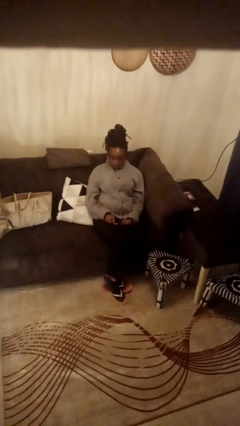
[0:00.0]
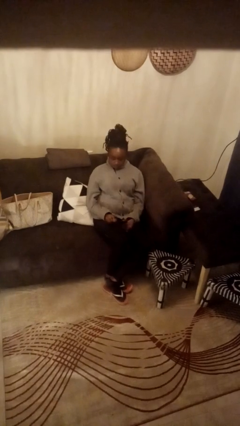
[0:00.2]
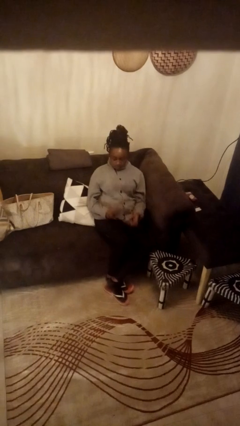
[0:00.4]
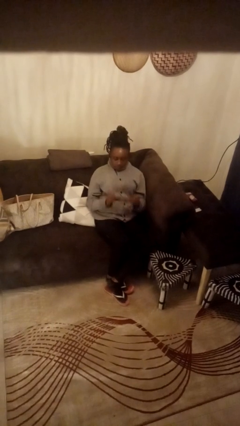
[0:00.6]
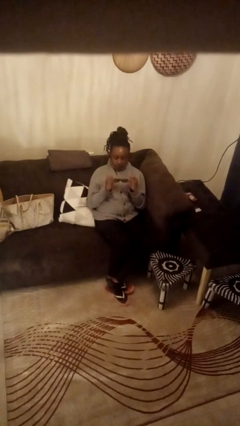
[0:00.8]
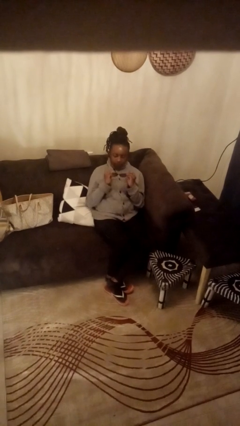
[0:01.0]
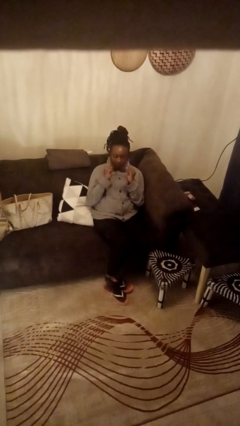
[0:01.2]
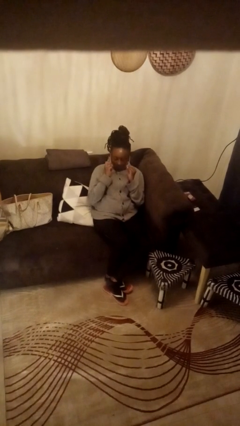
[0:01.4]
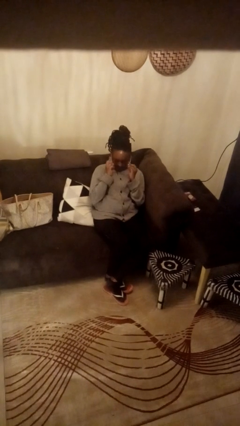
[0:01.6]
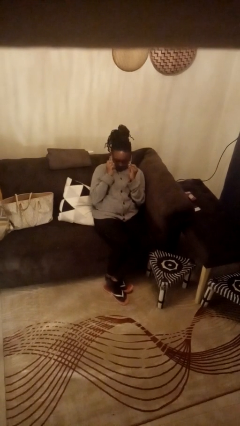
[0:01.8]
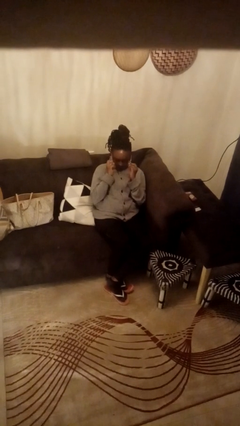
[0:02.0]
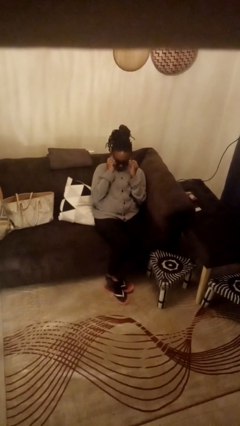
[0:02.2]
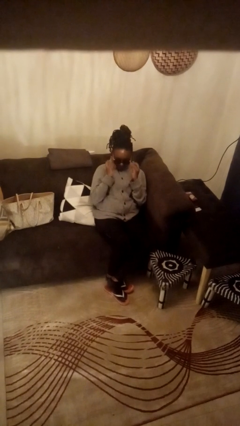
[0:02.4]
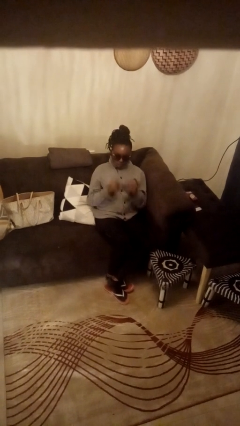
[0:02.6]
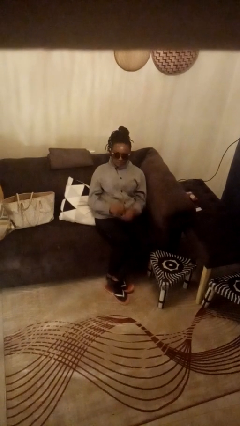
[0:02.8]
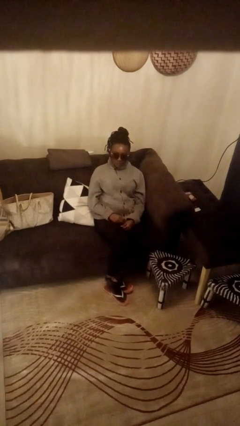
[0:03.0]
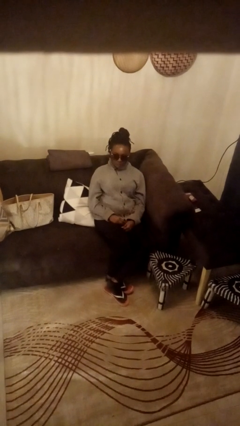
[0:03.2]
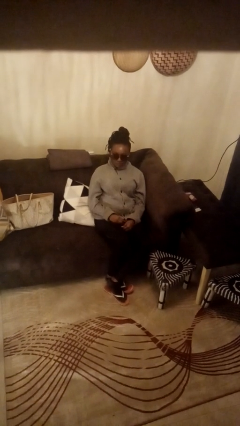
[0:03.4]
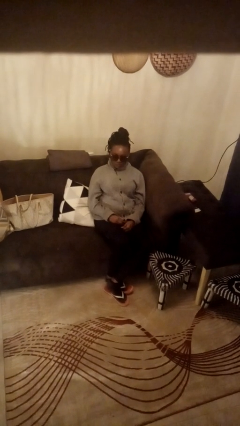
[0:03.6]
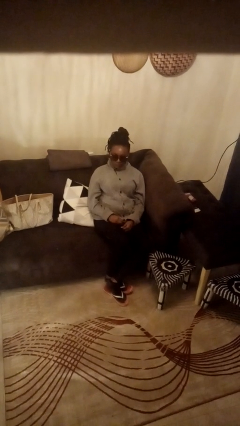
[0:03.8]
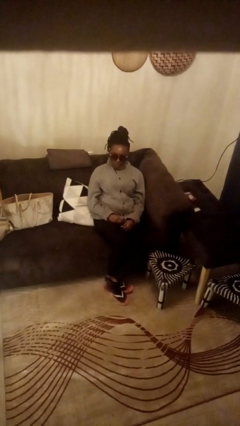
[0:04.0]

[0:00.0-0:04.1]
person puts on sunglasses

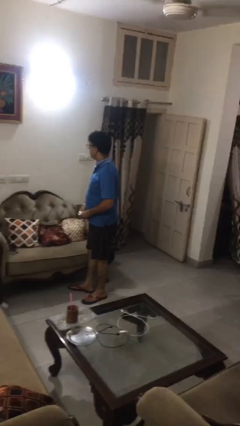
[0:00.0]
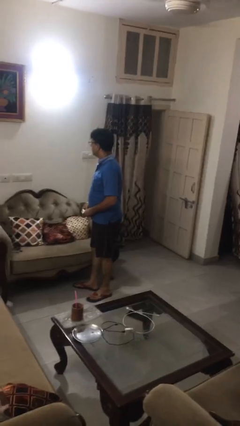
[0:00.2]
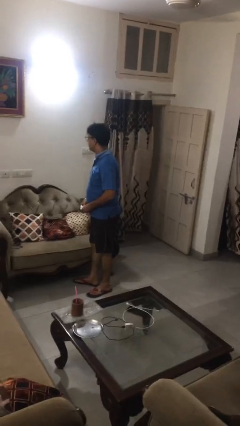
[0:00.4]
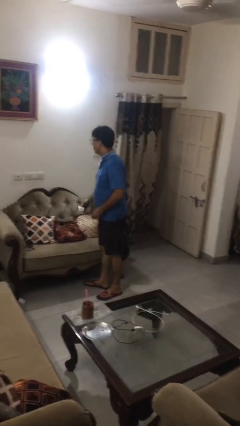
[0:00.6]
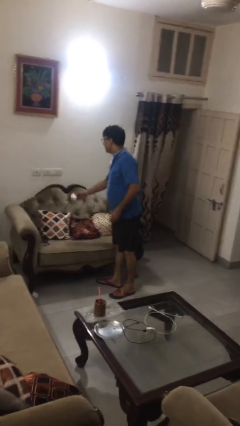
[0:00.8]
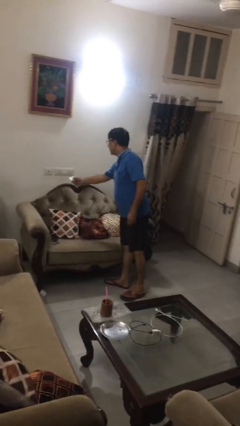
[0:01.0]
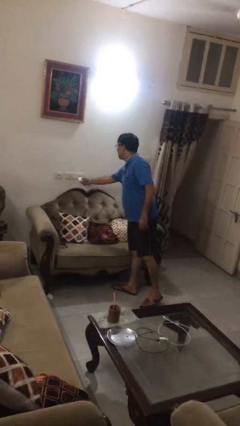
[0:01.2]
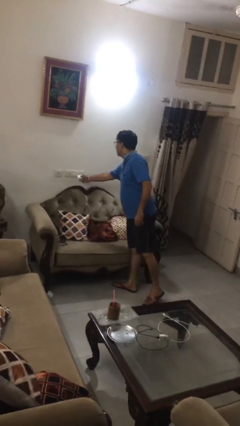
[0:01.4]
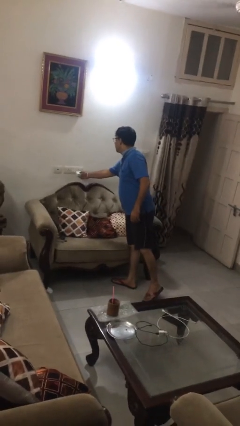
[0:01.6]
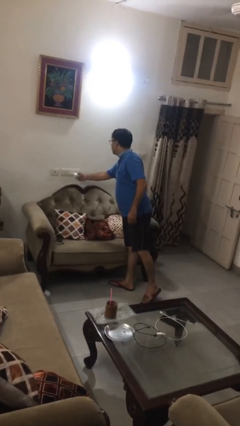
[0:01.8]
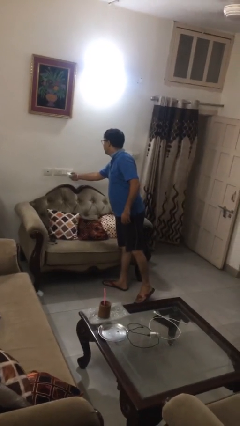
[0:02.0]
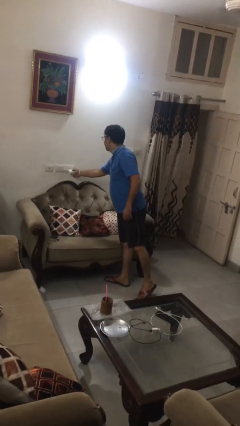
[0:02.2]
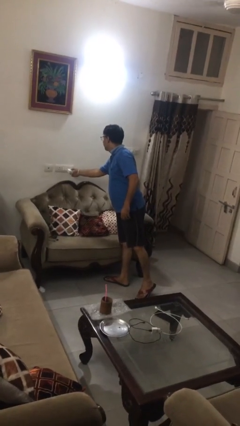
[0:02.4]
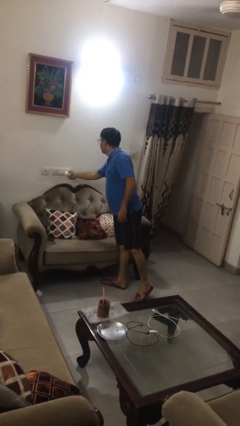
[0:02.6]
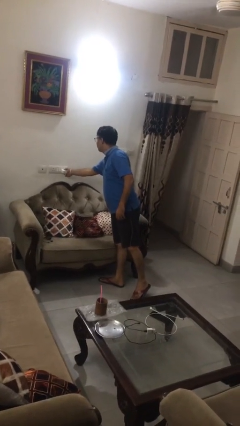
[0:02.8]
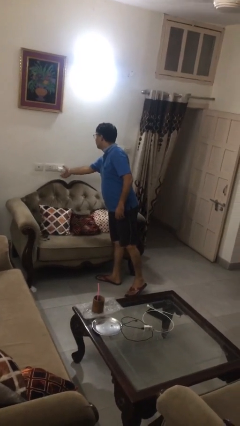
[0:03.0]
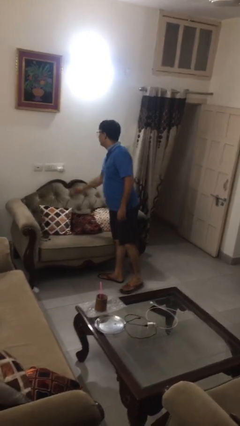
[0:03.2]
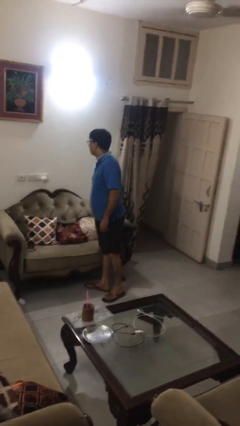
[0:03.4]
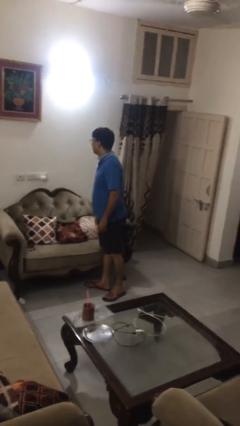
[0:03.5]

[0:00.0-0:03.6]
person plugs into electrical socket

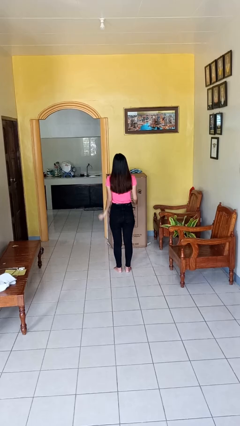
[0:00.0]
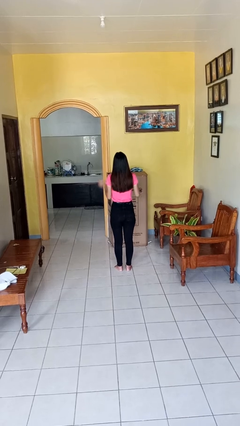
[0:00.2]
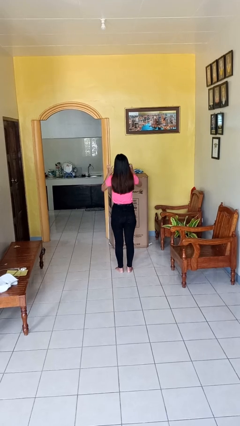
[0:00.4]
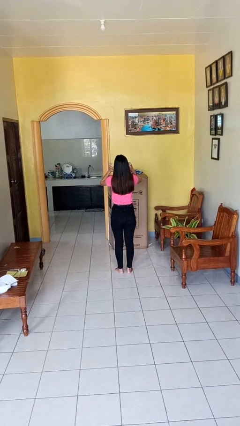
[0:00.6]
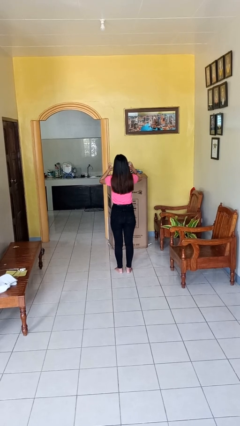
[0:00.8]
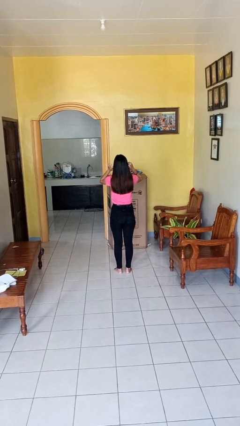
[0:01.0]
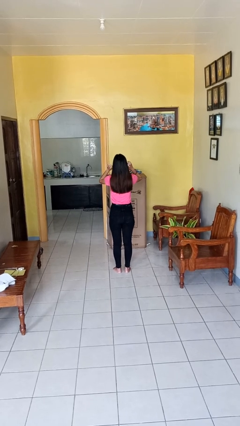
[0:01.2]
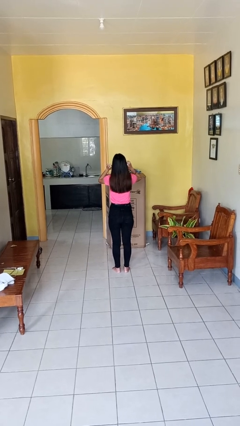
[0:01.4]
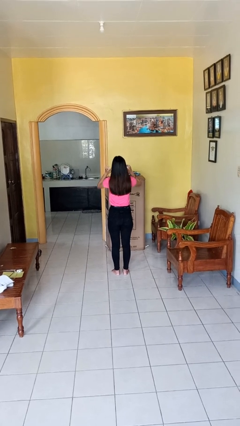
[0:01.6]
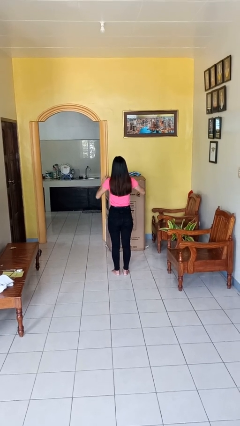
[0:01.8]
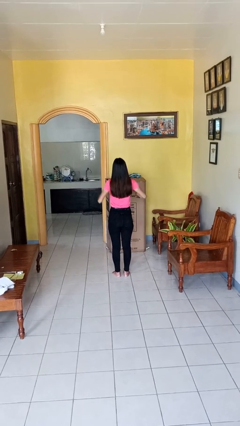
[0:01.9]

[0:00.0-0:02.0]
person puts fingers in ear

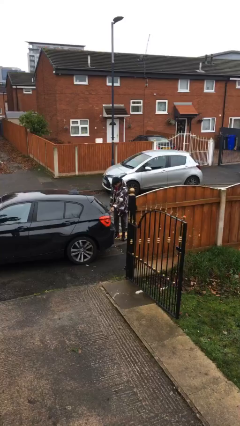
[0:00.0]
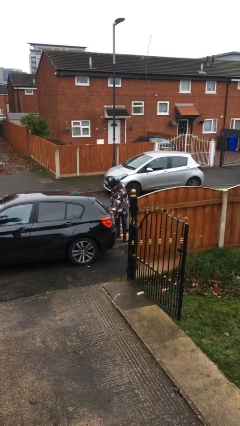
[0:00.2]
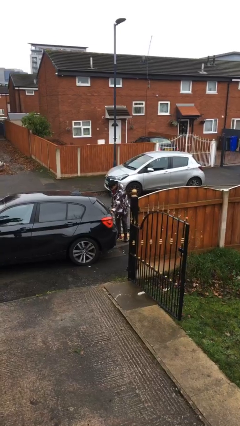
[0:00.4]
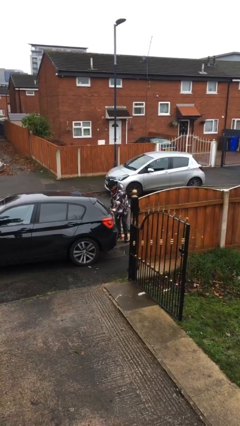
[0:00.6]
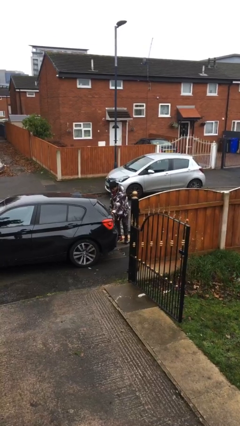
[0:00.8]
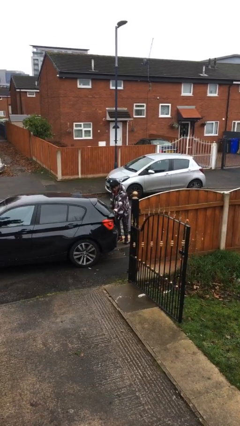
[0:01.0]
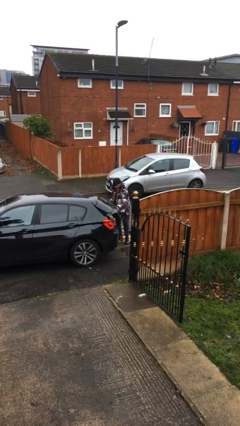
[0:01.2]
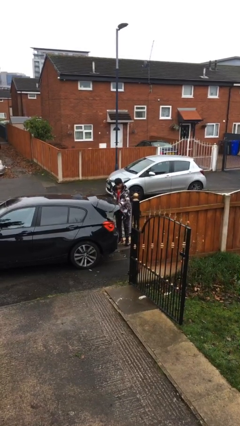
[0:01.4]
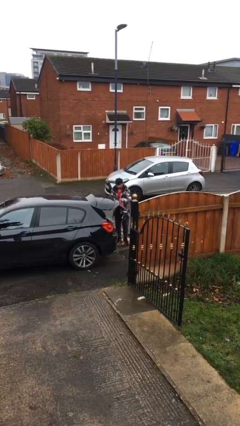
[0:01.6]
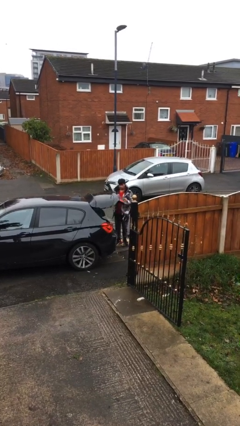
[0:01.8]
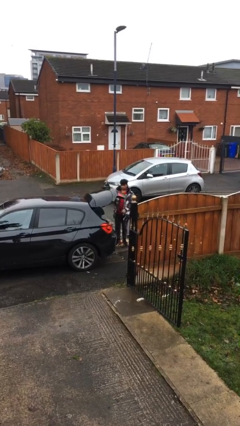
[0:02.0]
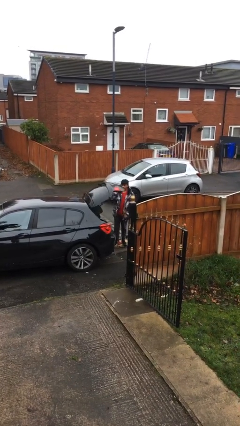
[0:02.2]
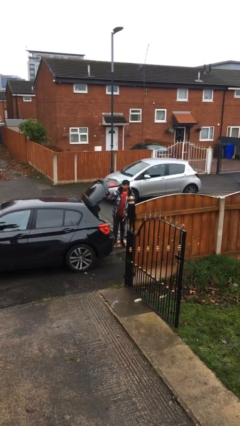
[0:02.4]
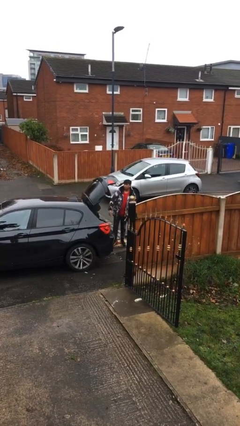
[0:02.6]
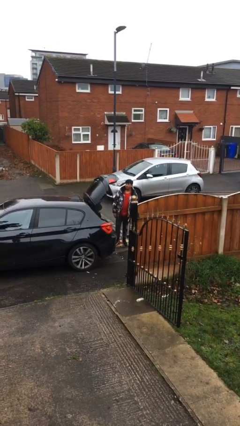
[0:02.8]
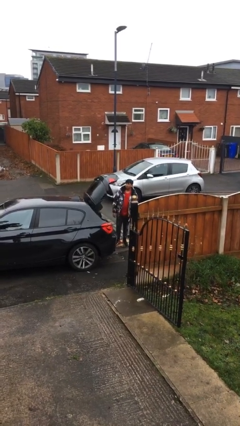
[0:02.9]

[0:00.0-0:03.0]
person opens car trunk

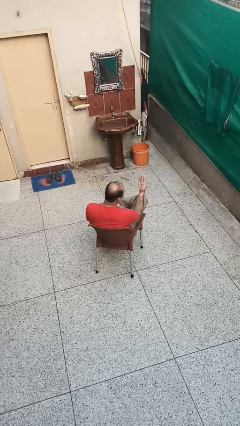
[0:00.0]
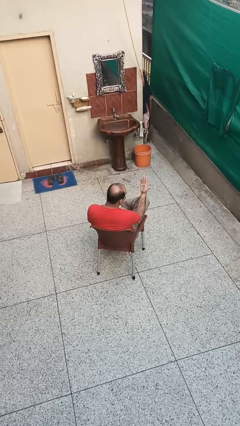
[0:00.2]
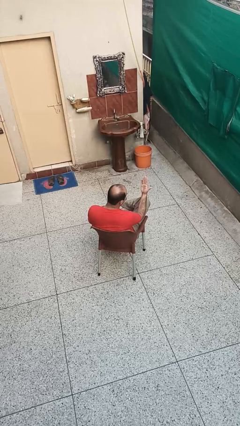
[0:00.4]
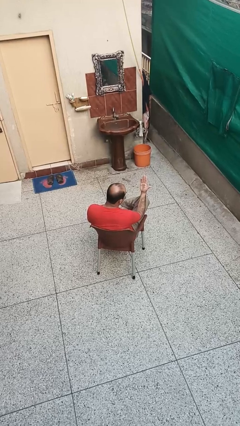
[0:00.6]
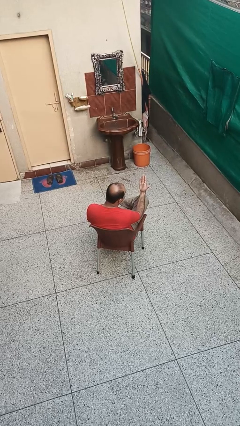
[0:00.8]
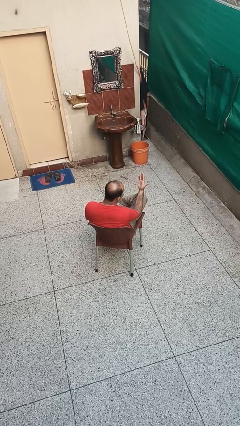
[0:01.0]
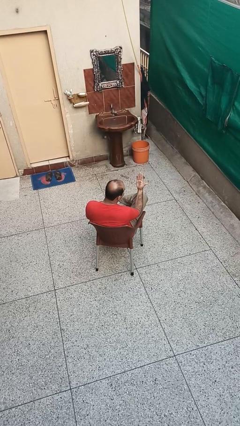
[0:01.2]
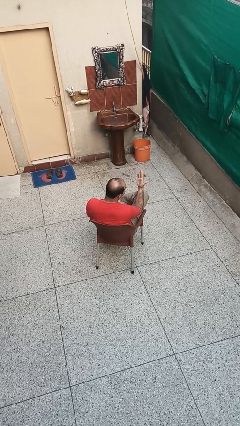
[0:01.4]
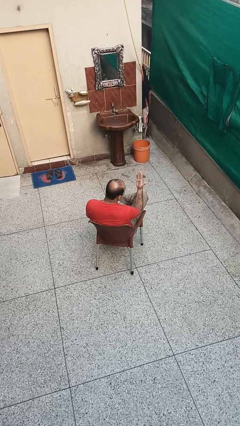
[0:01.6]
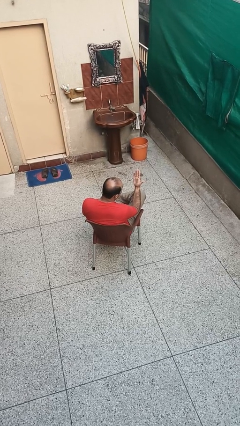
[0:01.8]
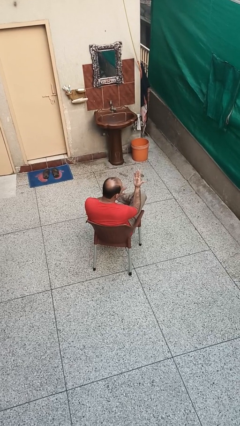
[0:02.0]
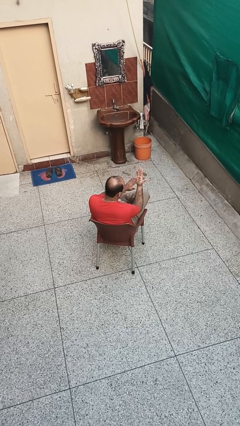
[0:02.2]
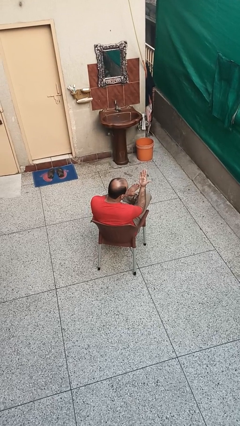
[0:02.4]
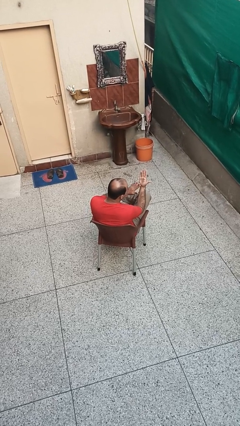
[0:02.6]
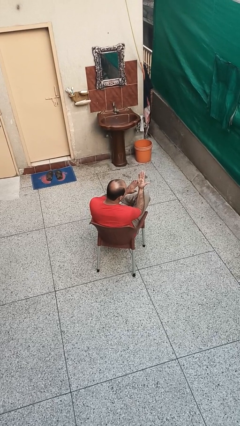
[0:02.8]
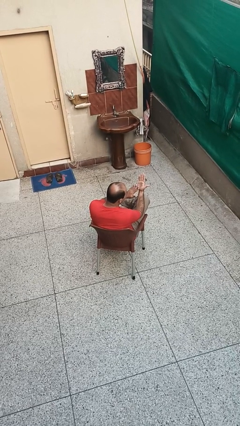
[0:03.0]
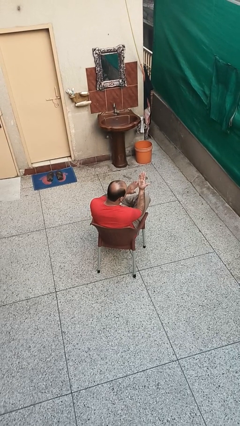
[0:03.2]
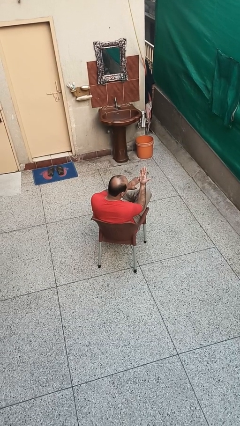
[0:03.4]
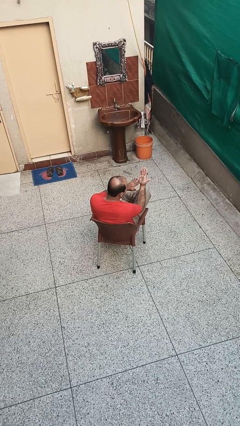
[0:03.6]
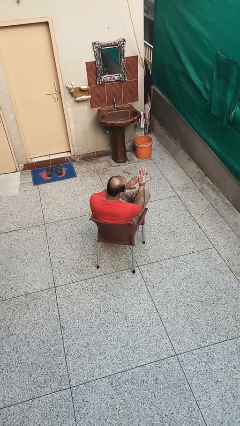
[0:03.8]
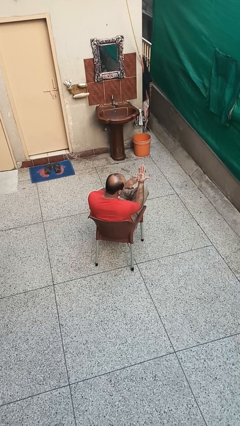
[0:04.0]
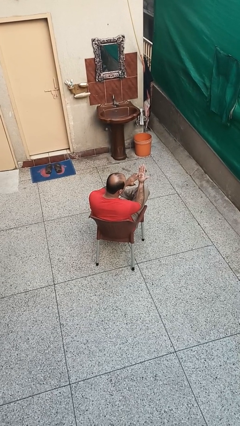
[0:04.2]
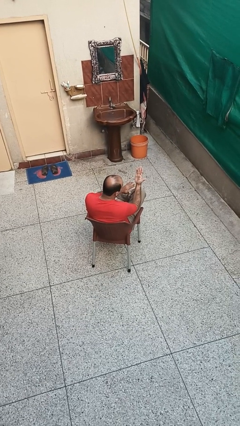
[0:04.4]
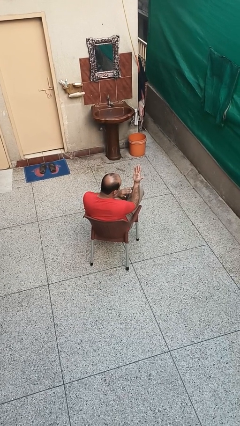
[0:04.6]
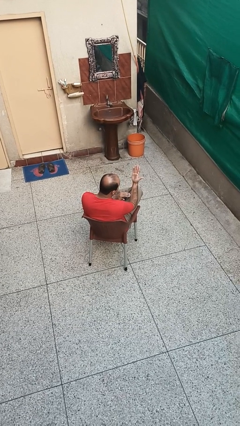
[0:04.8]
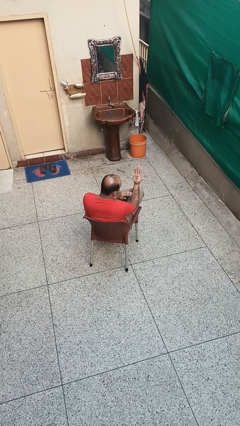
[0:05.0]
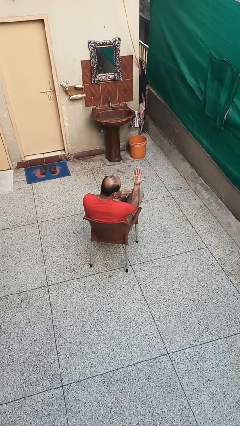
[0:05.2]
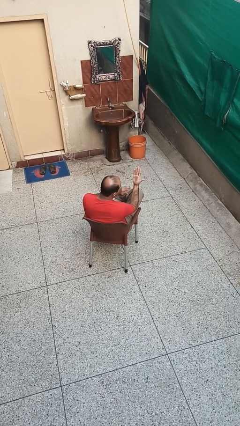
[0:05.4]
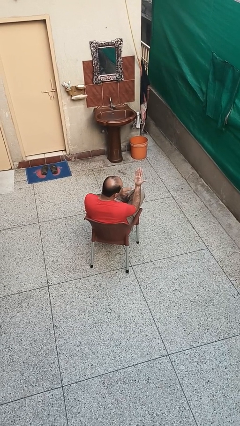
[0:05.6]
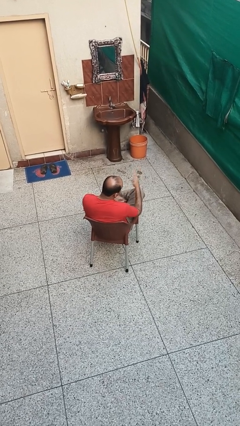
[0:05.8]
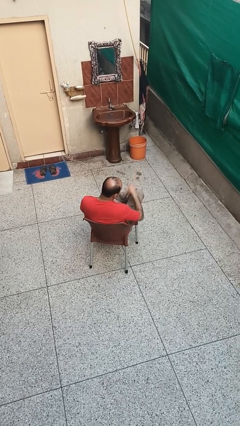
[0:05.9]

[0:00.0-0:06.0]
person looks at hands in lap
